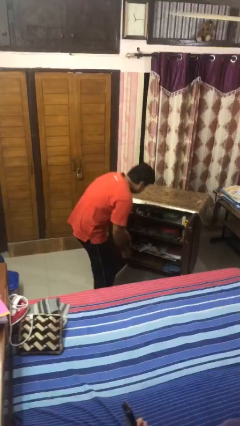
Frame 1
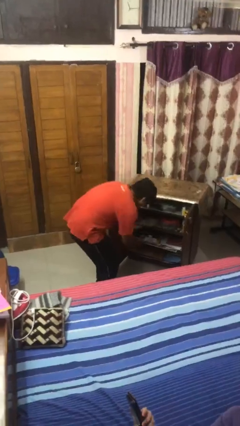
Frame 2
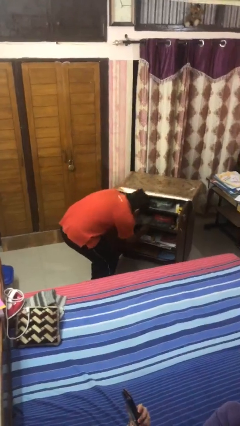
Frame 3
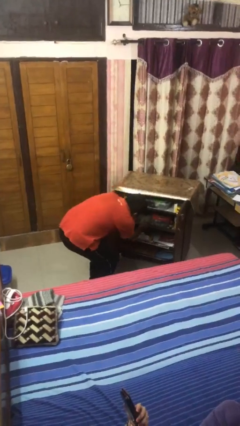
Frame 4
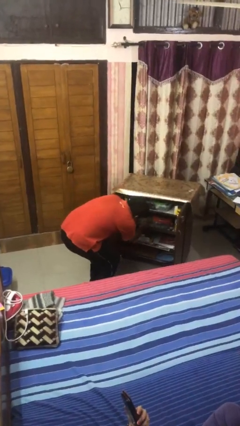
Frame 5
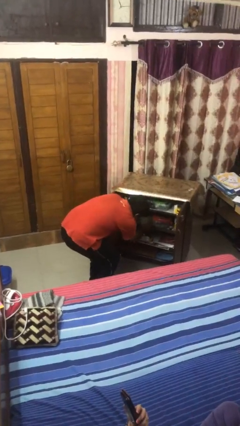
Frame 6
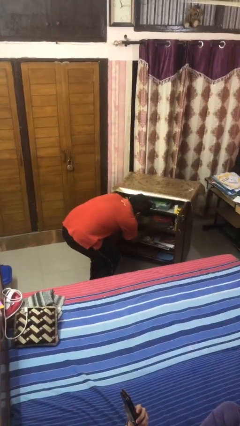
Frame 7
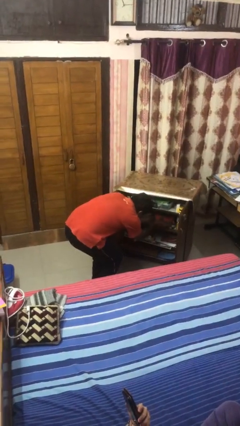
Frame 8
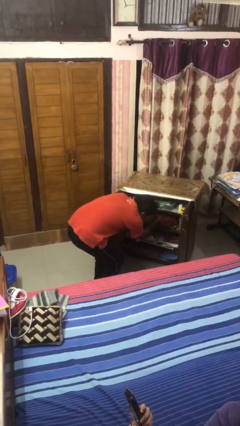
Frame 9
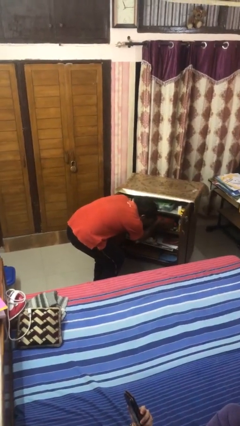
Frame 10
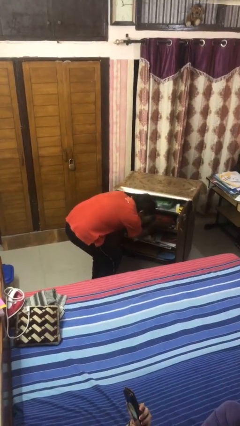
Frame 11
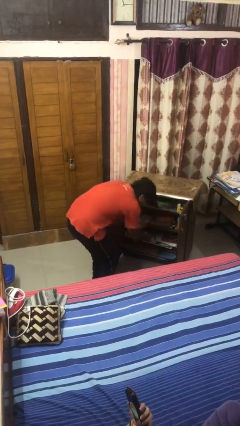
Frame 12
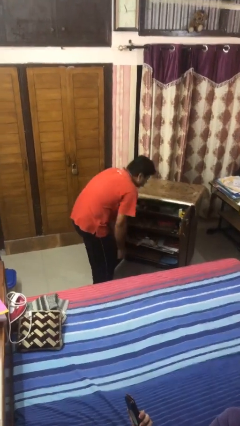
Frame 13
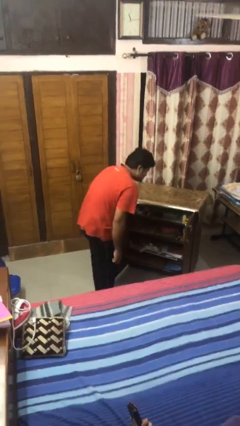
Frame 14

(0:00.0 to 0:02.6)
person searches in cabinet

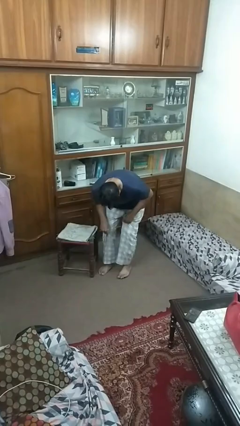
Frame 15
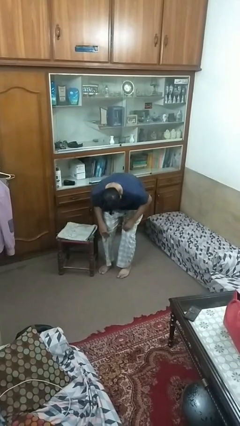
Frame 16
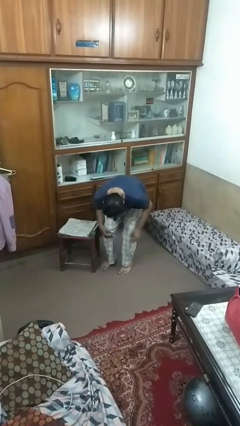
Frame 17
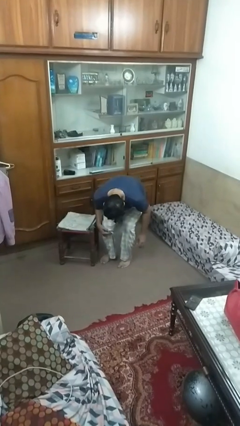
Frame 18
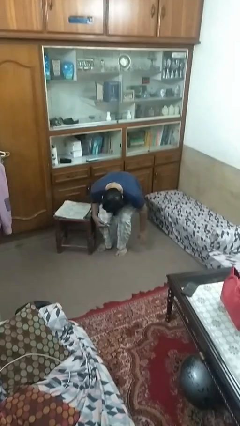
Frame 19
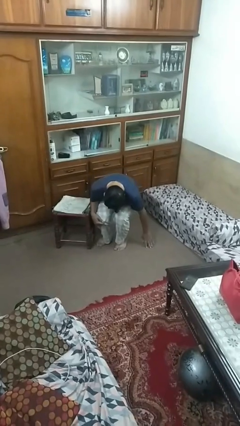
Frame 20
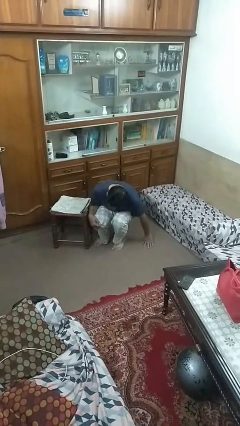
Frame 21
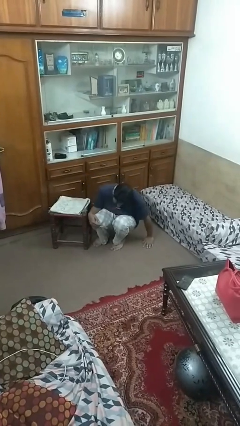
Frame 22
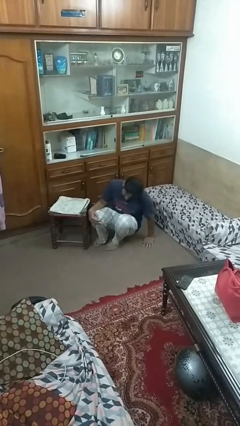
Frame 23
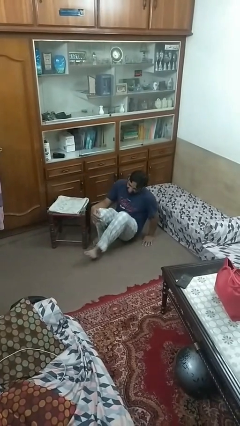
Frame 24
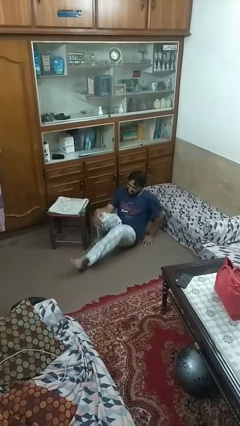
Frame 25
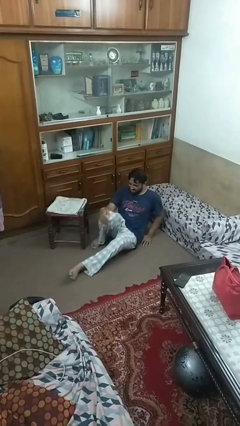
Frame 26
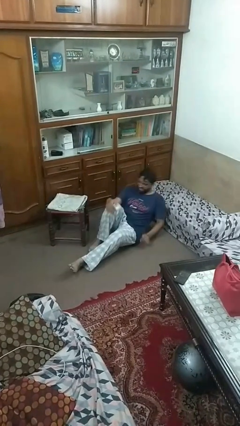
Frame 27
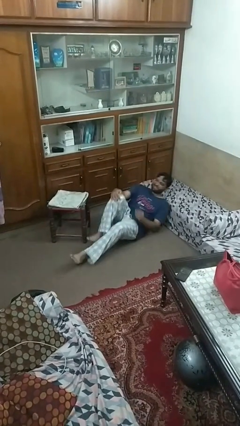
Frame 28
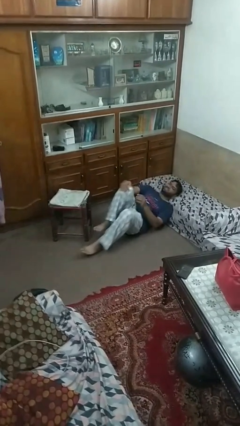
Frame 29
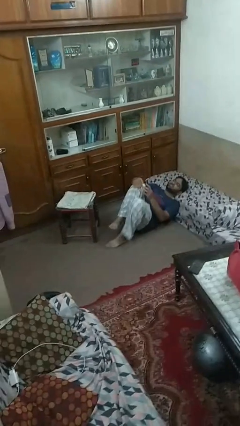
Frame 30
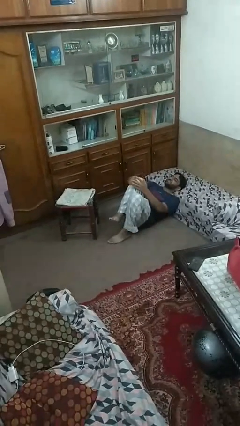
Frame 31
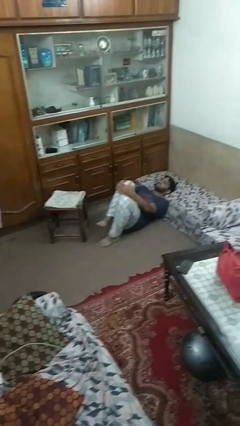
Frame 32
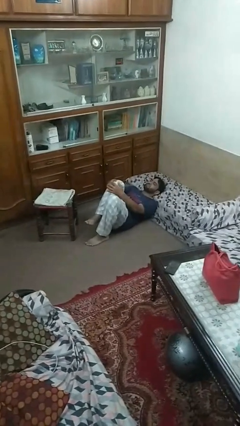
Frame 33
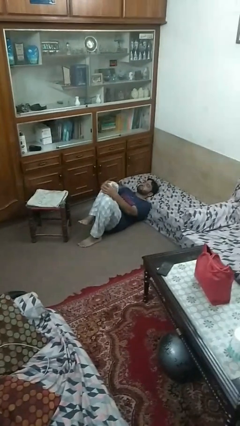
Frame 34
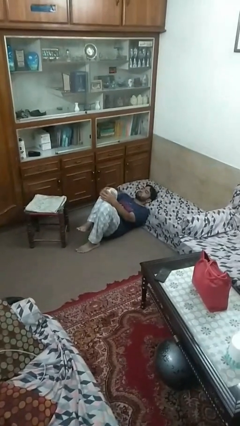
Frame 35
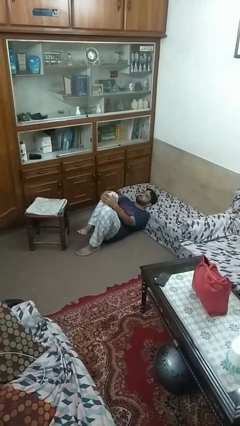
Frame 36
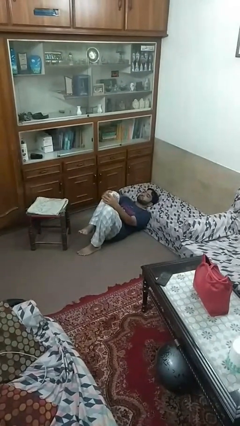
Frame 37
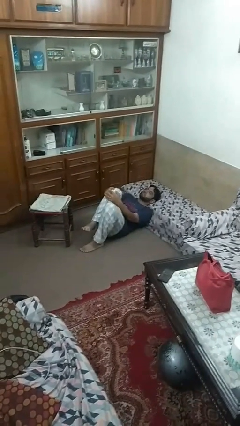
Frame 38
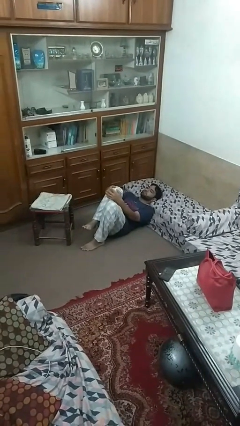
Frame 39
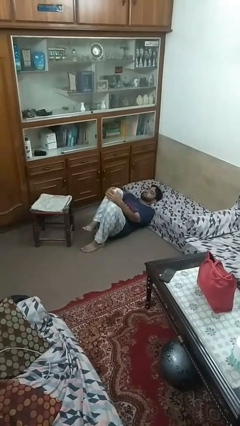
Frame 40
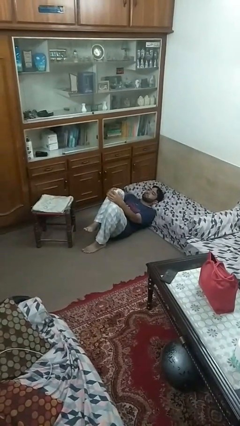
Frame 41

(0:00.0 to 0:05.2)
person lies down on floor

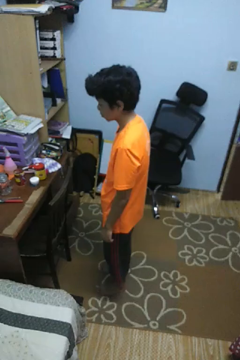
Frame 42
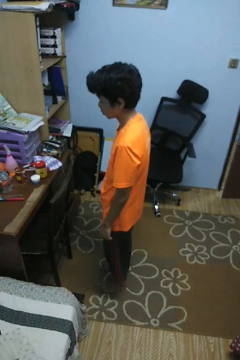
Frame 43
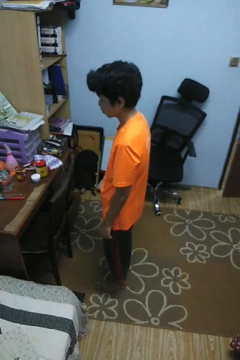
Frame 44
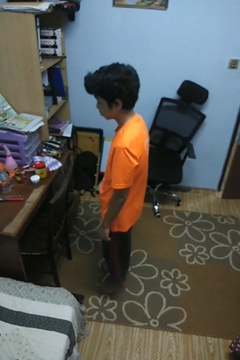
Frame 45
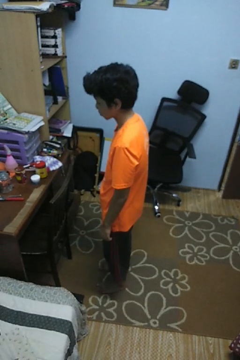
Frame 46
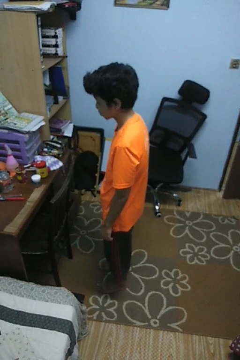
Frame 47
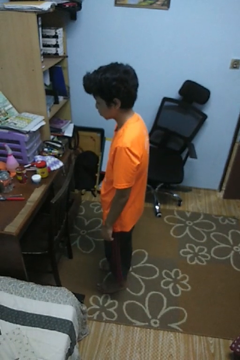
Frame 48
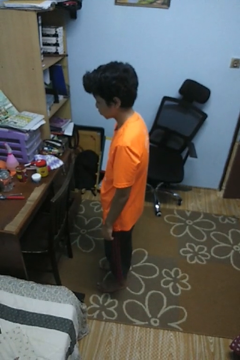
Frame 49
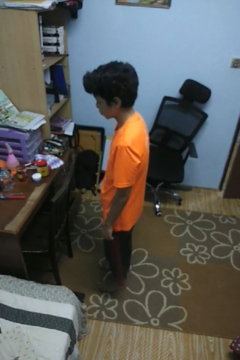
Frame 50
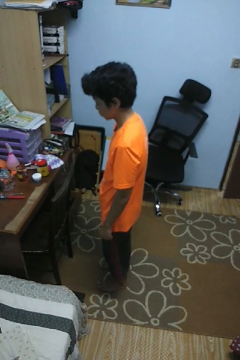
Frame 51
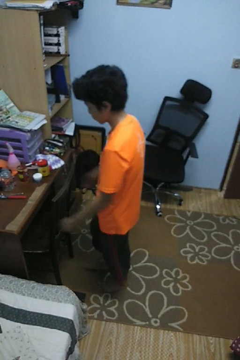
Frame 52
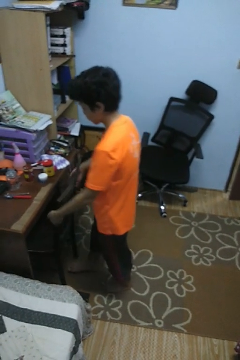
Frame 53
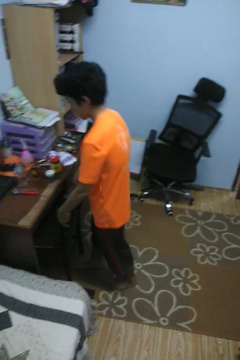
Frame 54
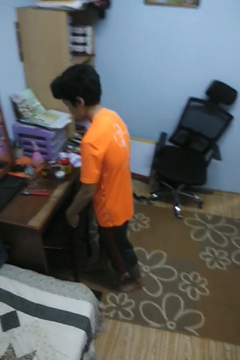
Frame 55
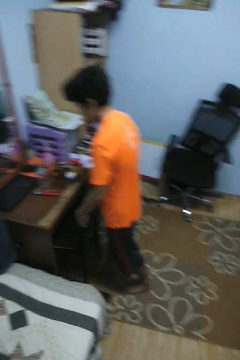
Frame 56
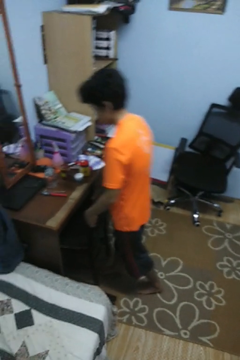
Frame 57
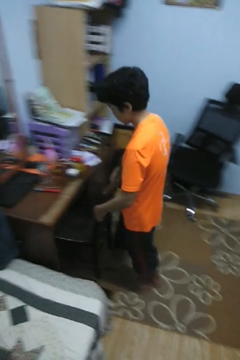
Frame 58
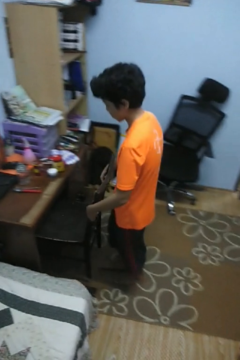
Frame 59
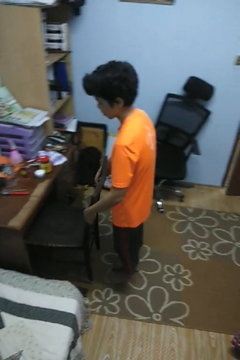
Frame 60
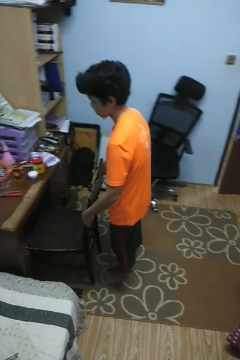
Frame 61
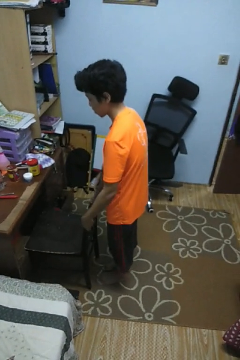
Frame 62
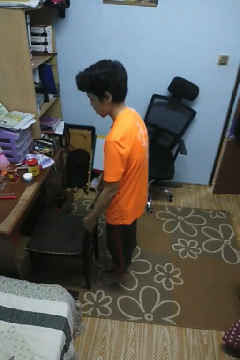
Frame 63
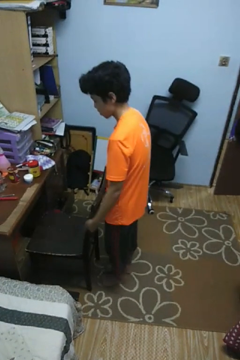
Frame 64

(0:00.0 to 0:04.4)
person pulls out chair

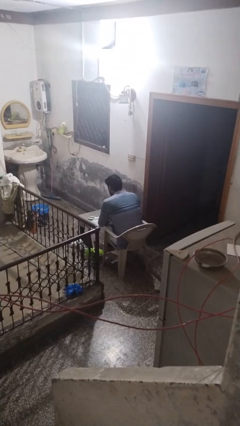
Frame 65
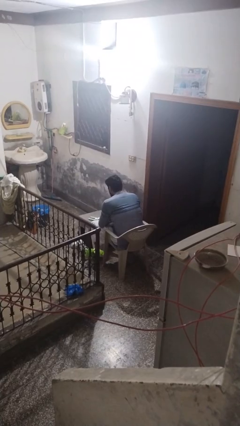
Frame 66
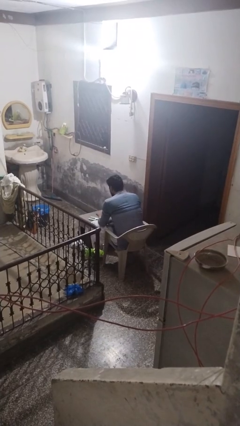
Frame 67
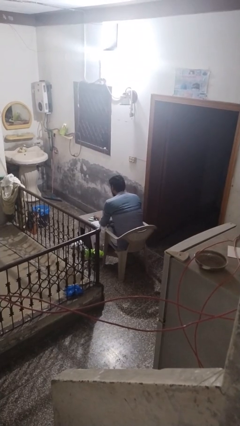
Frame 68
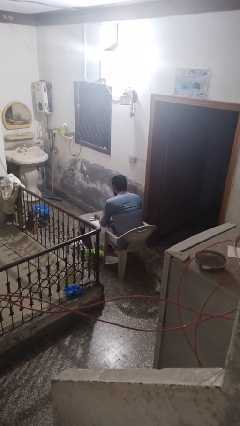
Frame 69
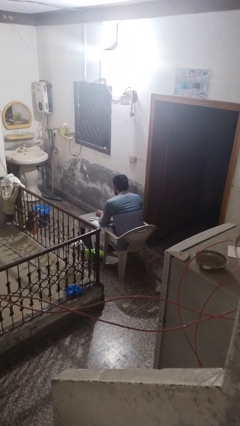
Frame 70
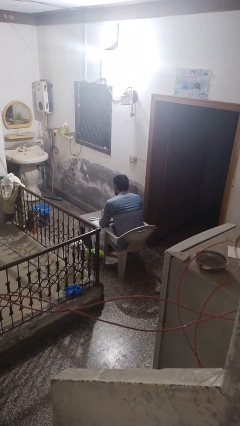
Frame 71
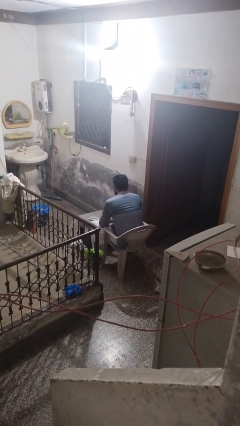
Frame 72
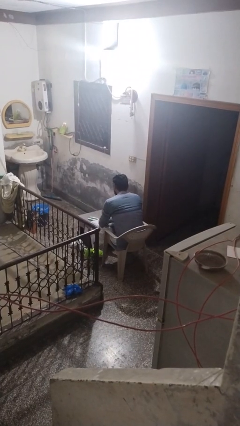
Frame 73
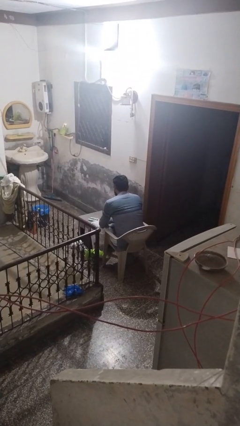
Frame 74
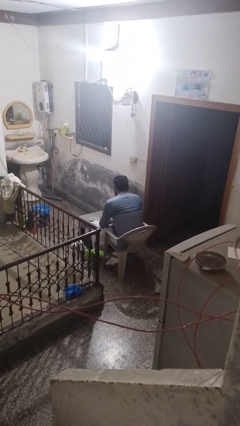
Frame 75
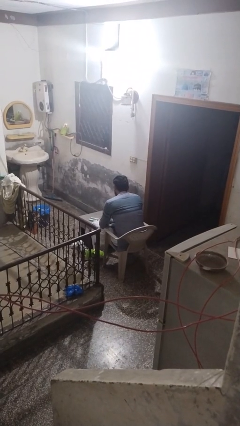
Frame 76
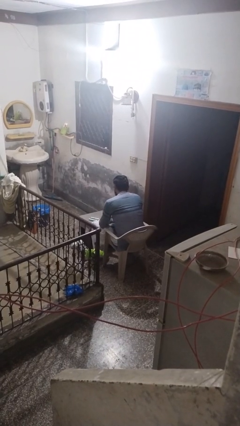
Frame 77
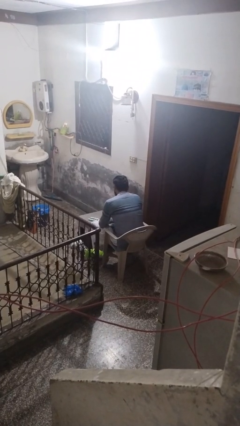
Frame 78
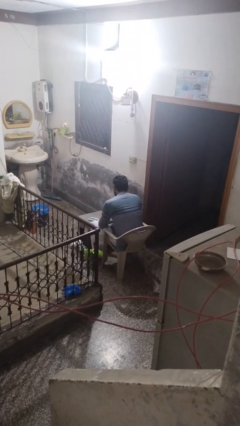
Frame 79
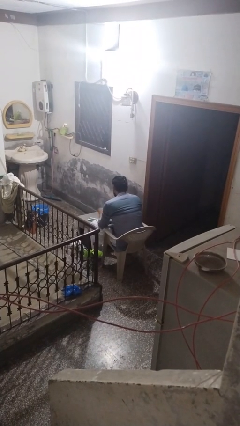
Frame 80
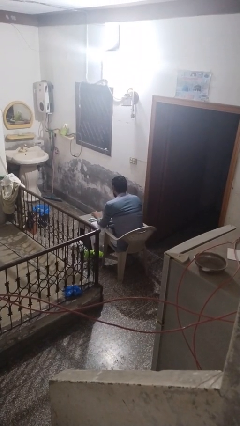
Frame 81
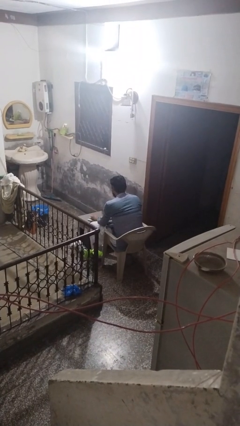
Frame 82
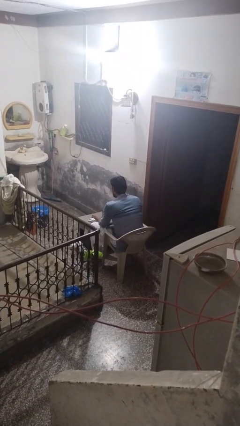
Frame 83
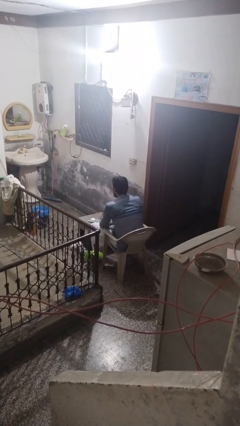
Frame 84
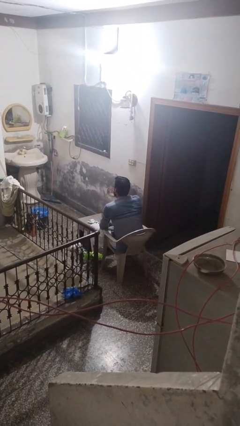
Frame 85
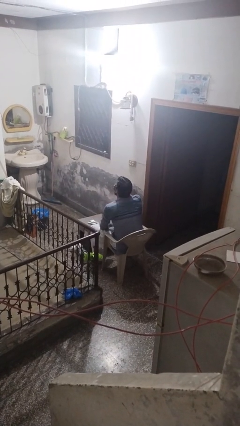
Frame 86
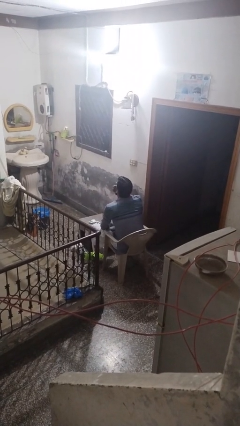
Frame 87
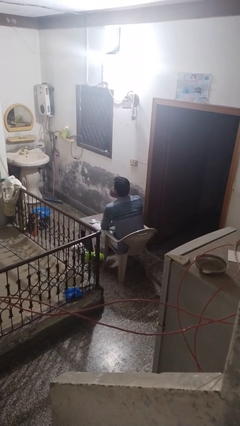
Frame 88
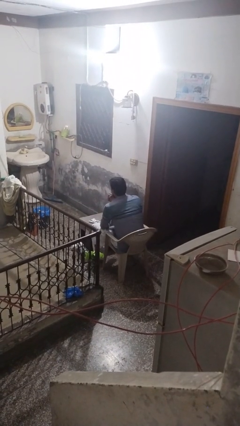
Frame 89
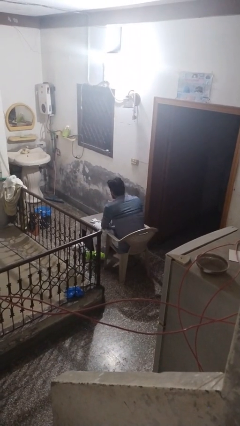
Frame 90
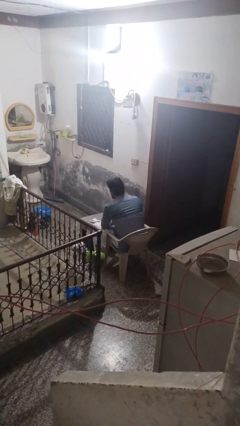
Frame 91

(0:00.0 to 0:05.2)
person takes medicine pills

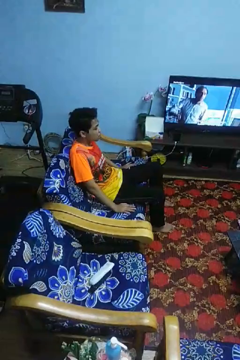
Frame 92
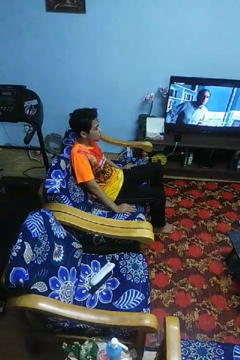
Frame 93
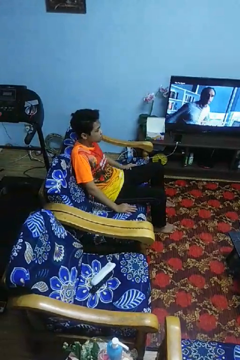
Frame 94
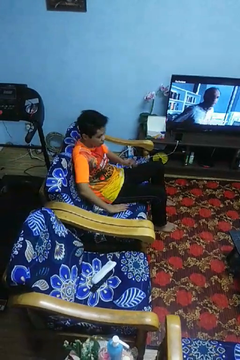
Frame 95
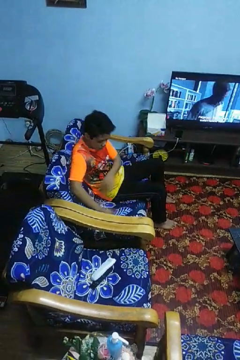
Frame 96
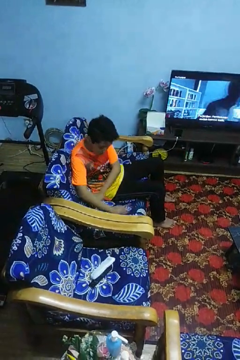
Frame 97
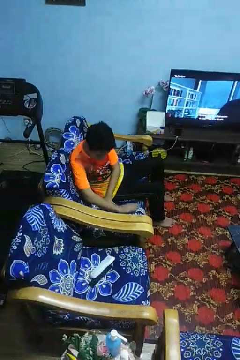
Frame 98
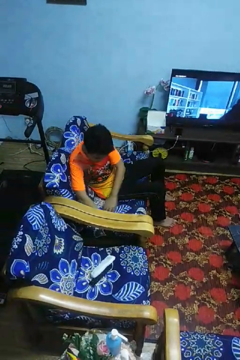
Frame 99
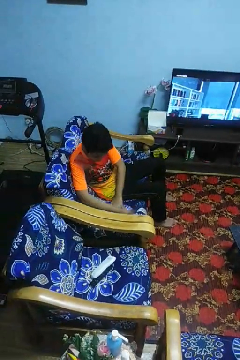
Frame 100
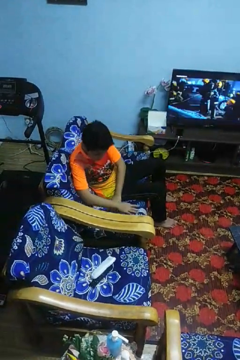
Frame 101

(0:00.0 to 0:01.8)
person searches in couch
